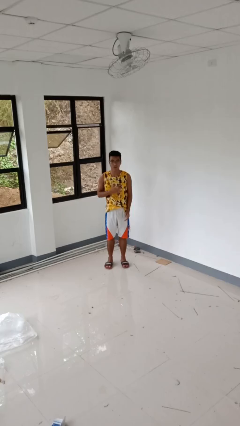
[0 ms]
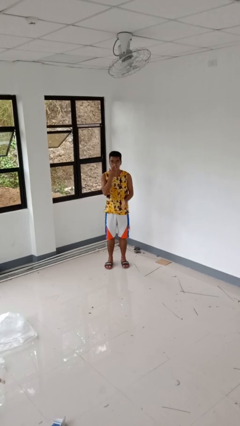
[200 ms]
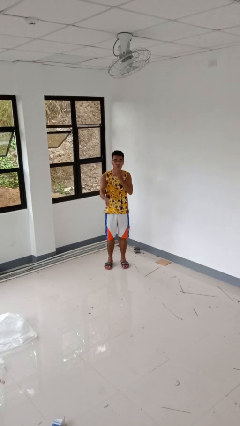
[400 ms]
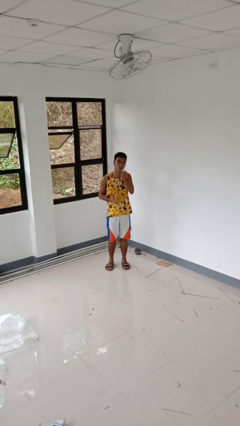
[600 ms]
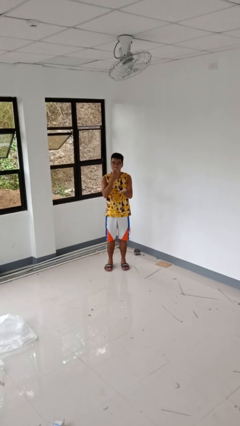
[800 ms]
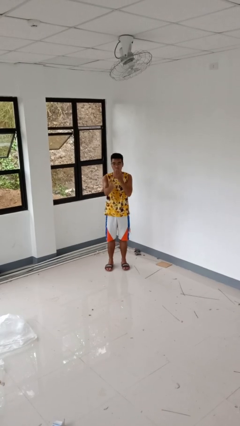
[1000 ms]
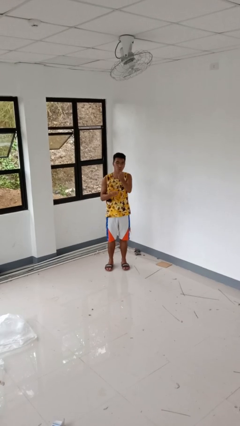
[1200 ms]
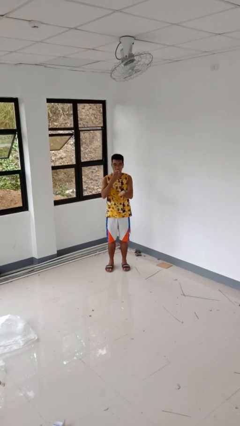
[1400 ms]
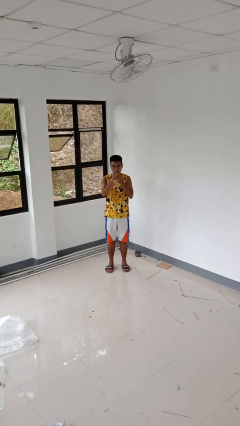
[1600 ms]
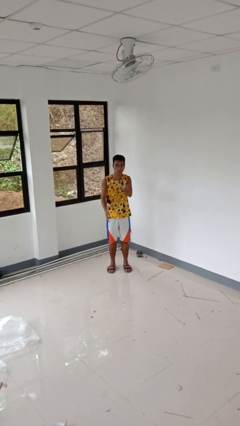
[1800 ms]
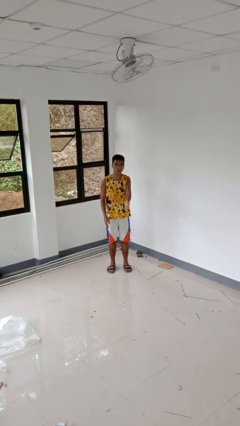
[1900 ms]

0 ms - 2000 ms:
person gestures blow kiss

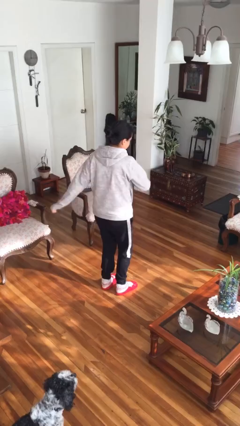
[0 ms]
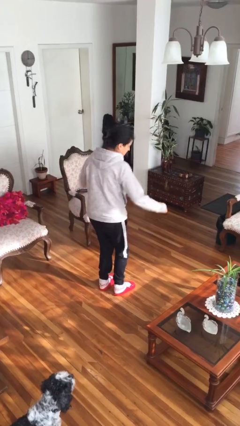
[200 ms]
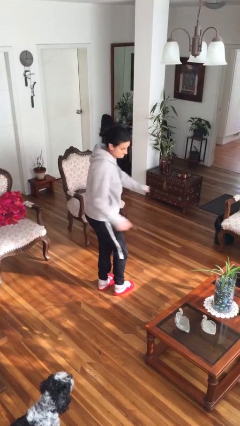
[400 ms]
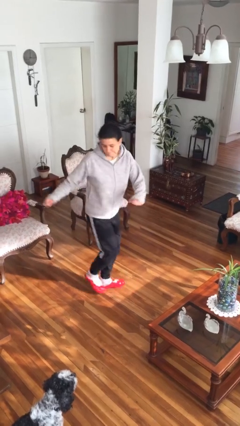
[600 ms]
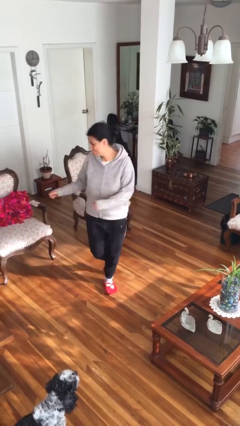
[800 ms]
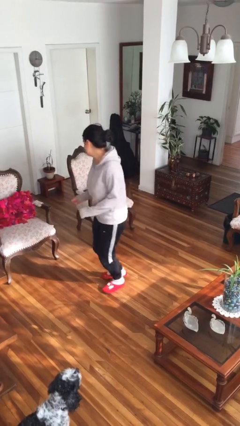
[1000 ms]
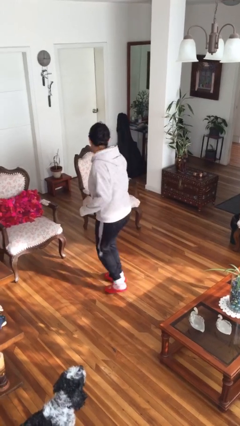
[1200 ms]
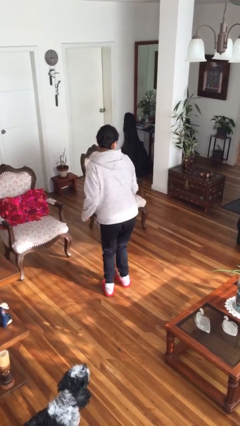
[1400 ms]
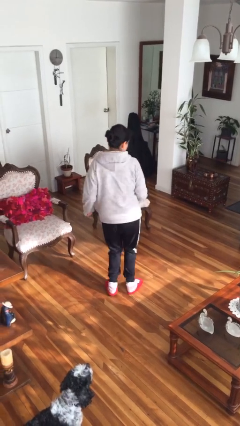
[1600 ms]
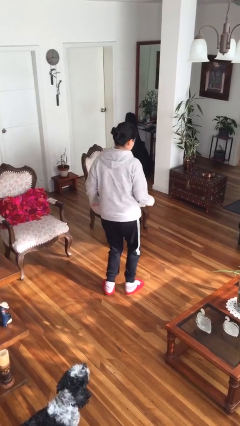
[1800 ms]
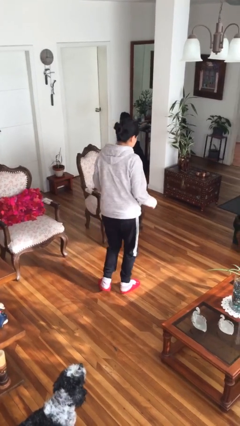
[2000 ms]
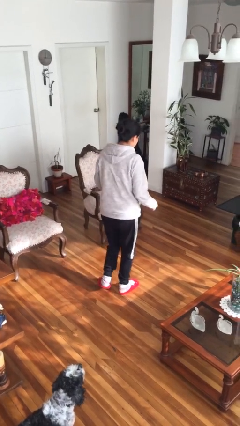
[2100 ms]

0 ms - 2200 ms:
person twirls

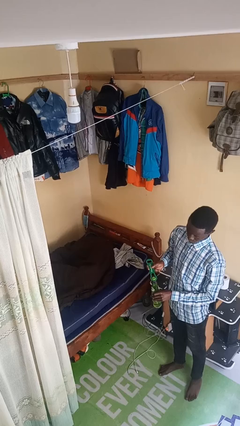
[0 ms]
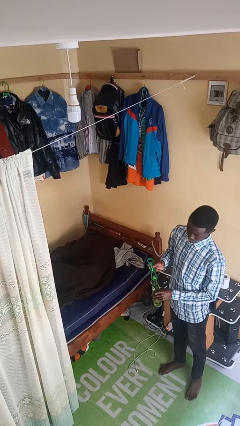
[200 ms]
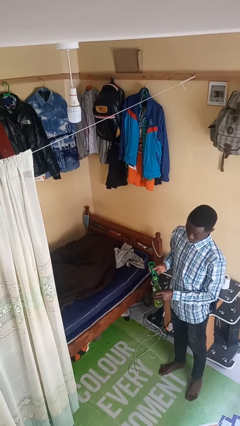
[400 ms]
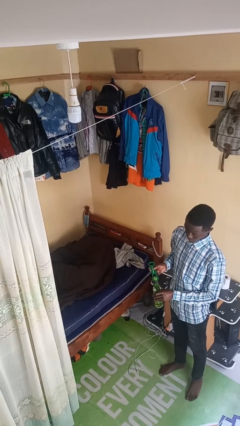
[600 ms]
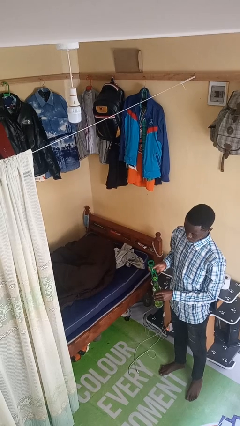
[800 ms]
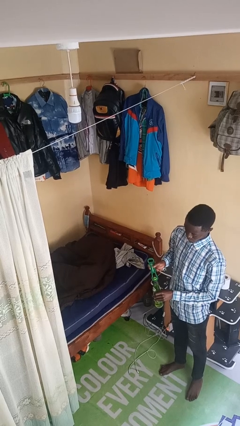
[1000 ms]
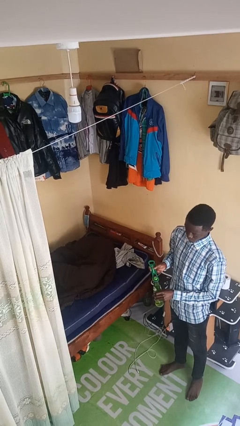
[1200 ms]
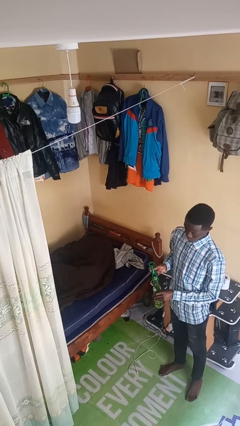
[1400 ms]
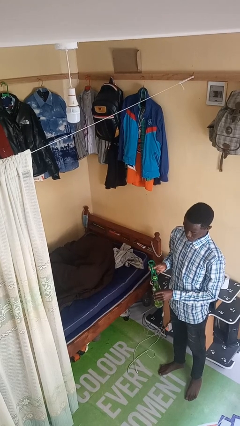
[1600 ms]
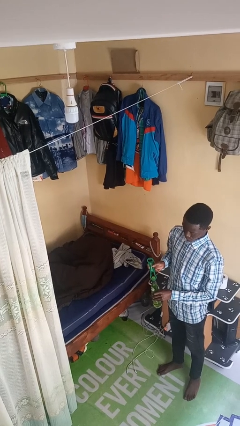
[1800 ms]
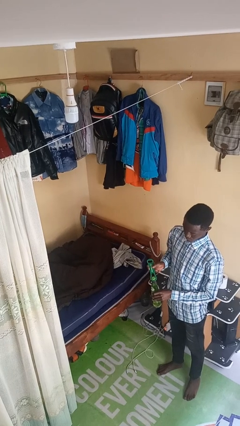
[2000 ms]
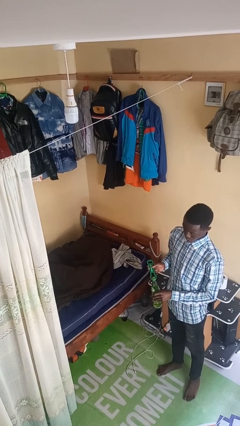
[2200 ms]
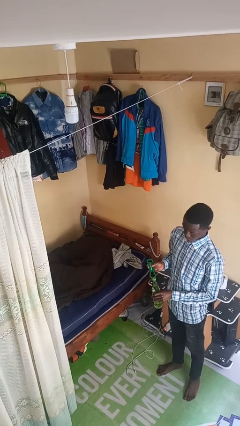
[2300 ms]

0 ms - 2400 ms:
person opens can with can opener

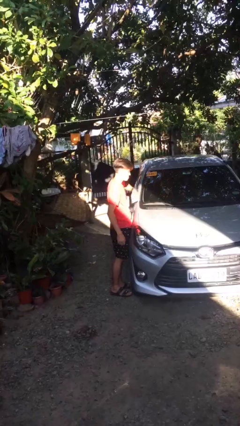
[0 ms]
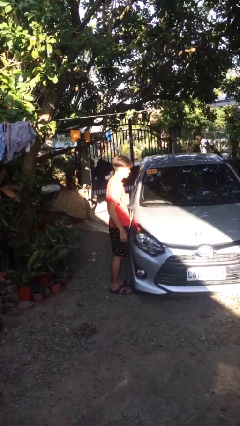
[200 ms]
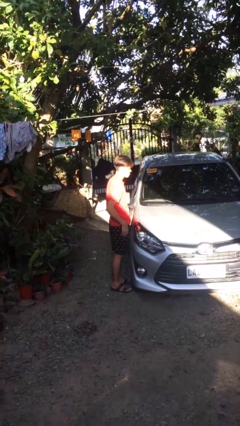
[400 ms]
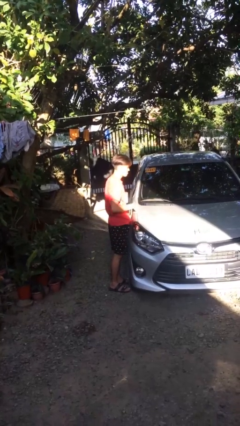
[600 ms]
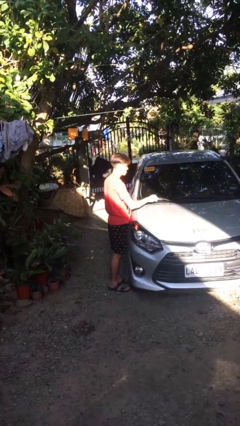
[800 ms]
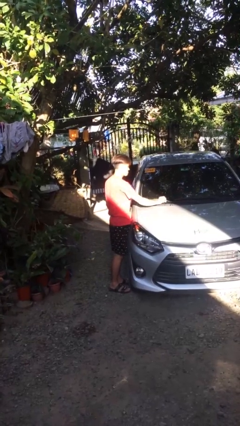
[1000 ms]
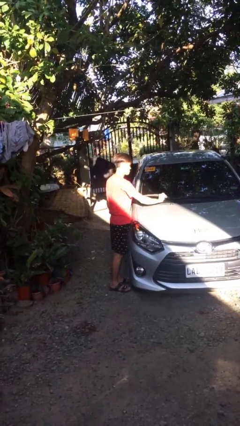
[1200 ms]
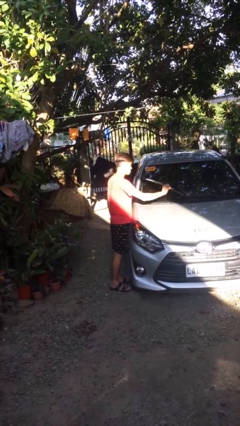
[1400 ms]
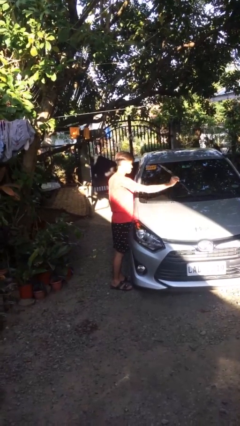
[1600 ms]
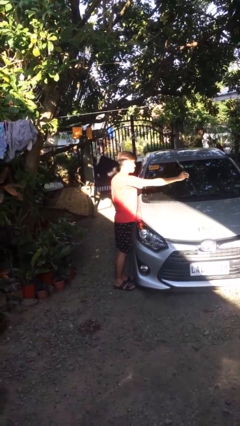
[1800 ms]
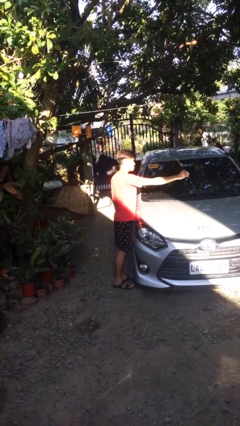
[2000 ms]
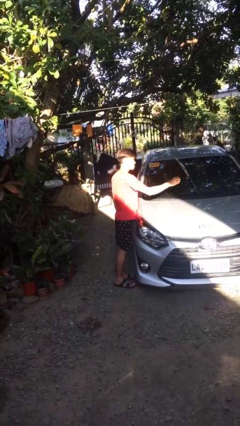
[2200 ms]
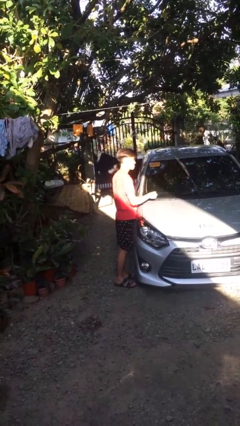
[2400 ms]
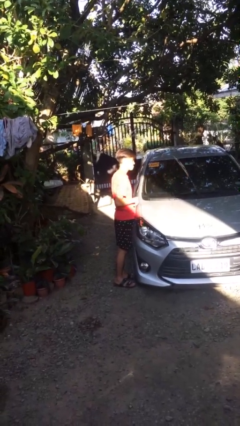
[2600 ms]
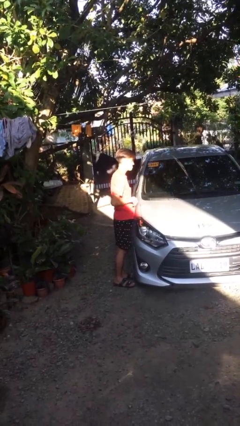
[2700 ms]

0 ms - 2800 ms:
person flips up car wipers

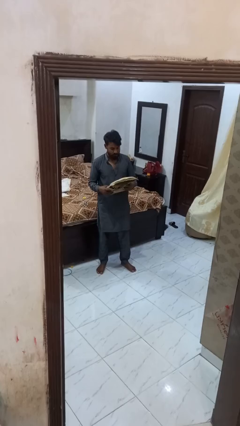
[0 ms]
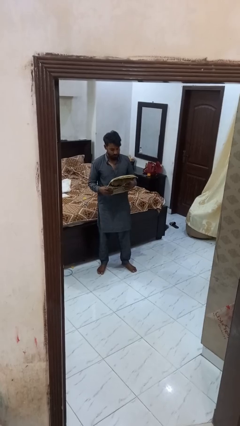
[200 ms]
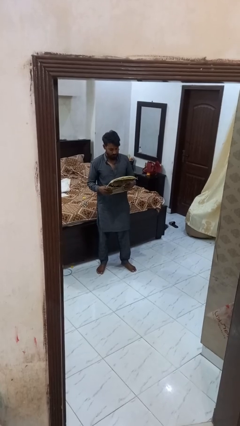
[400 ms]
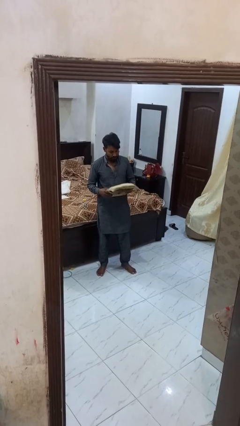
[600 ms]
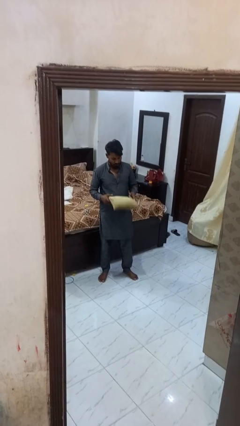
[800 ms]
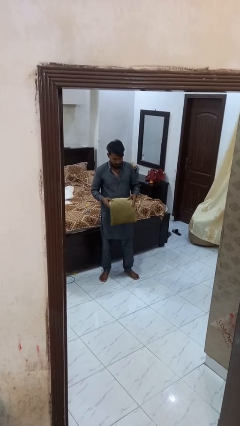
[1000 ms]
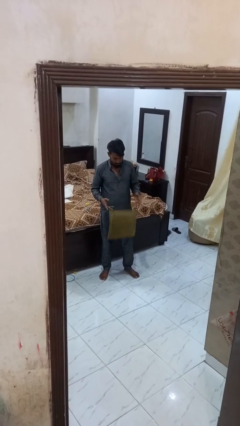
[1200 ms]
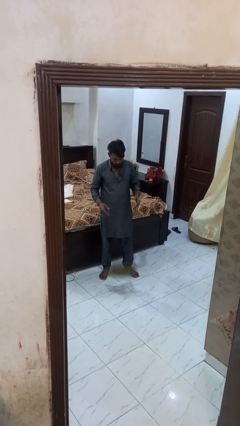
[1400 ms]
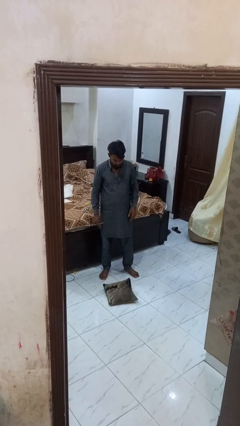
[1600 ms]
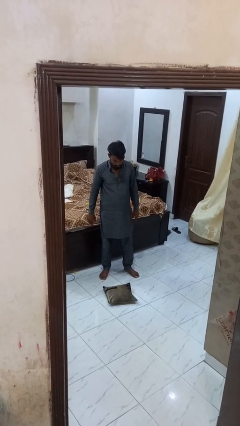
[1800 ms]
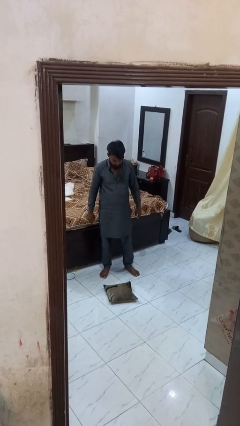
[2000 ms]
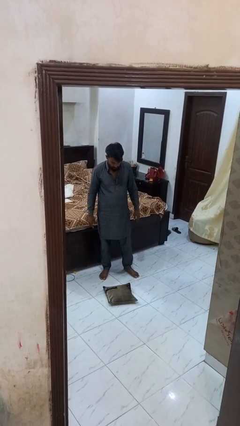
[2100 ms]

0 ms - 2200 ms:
person drops object

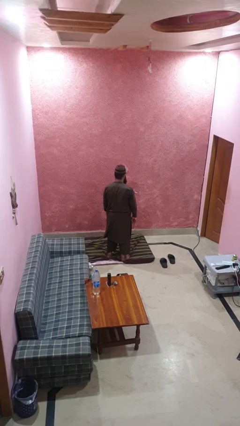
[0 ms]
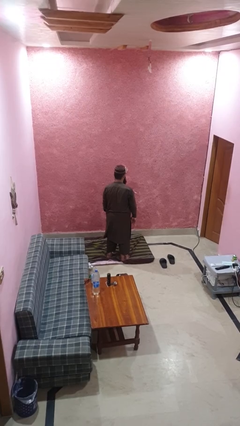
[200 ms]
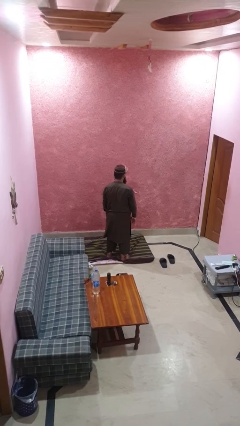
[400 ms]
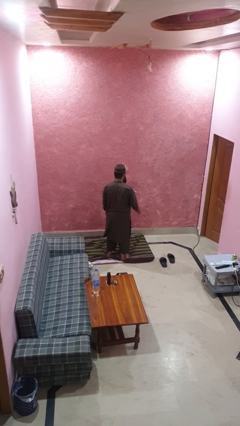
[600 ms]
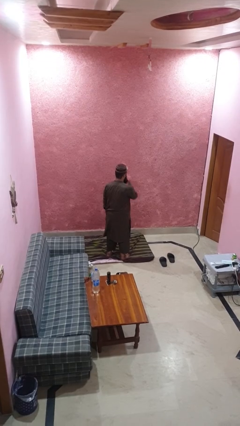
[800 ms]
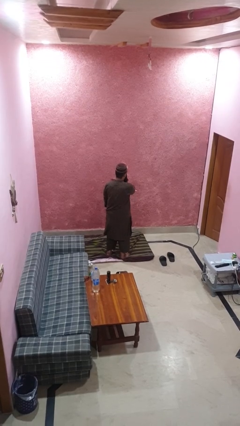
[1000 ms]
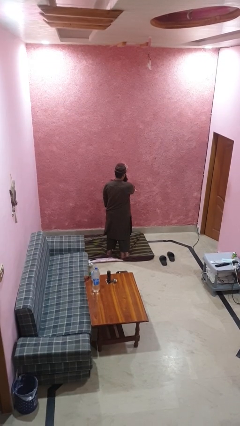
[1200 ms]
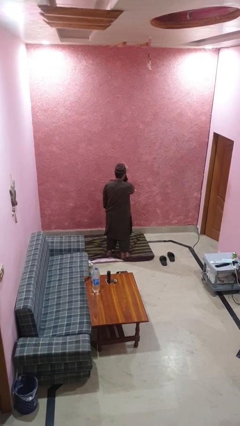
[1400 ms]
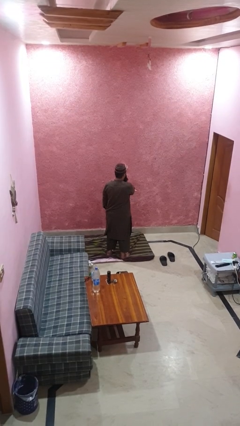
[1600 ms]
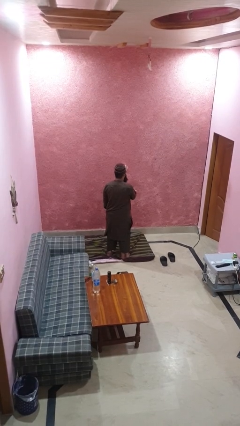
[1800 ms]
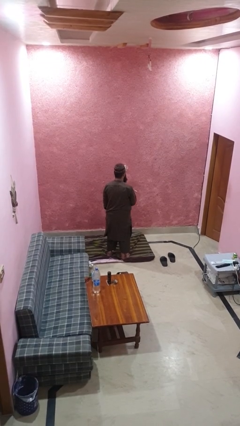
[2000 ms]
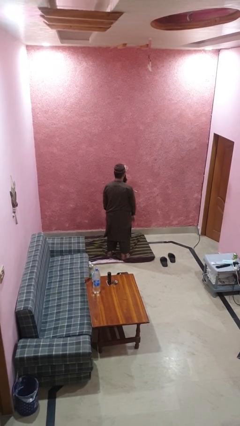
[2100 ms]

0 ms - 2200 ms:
person drums on chest

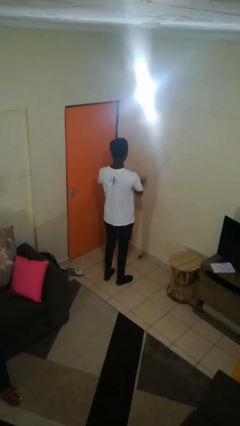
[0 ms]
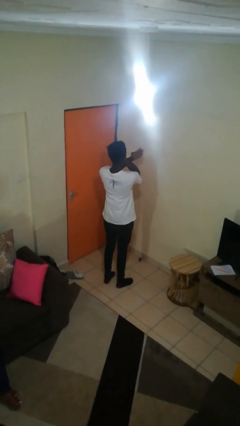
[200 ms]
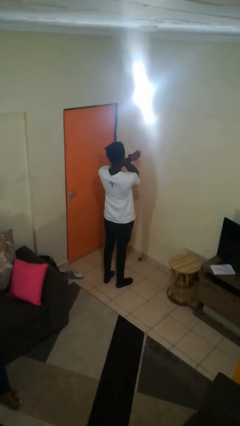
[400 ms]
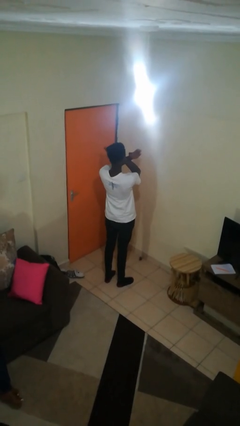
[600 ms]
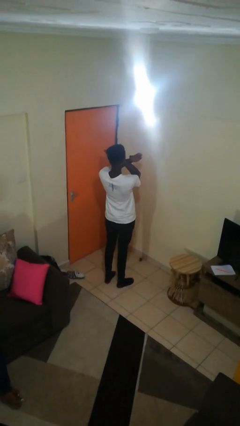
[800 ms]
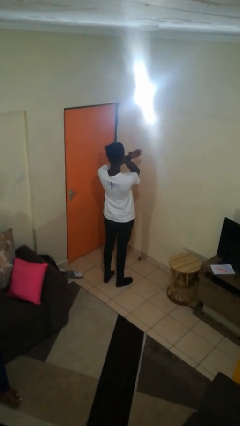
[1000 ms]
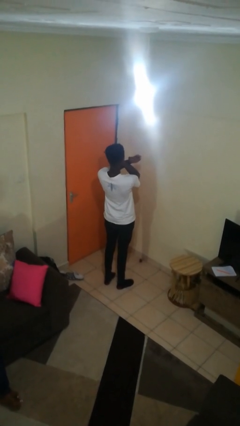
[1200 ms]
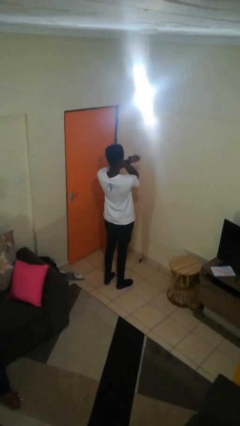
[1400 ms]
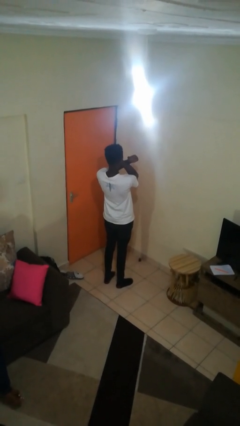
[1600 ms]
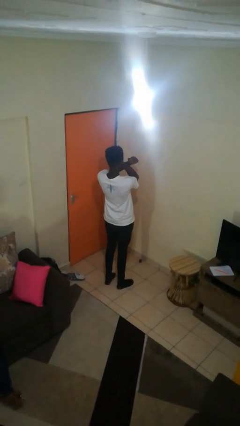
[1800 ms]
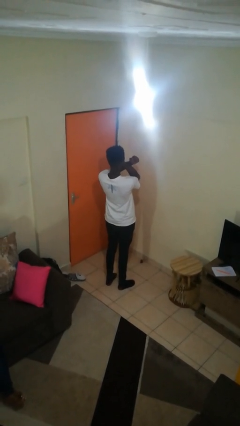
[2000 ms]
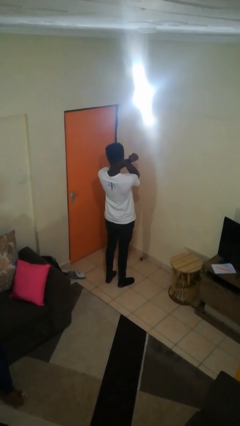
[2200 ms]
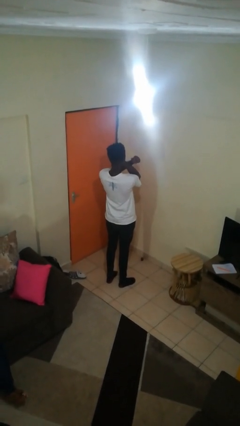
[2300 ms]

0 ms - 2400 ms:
person gestures arms x

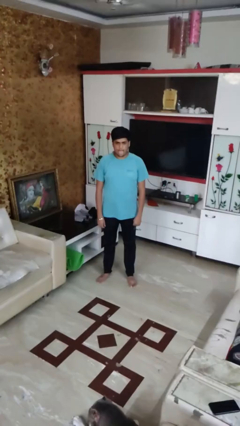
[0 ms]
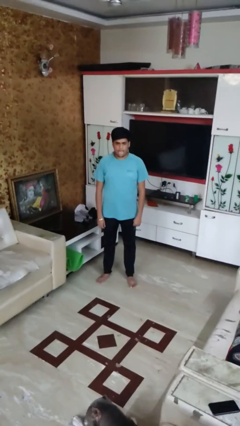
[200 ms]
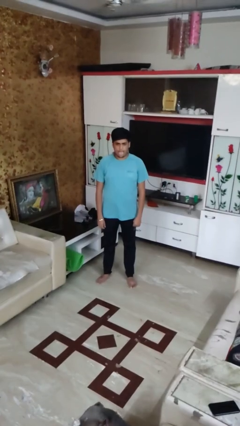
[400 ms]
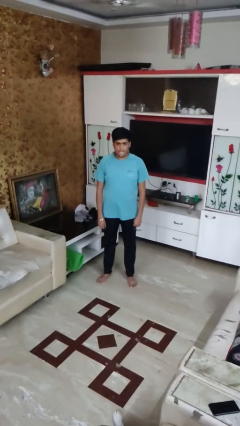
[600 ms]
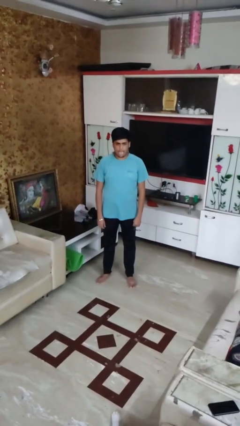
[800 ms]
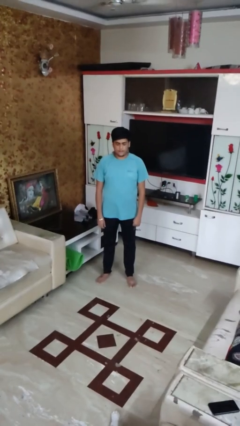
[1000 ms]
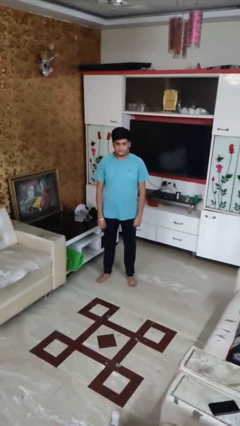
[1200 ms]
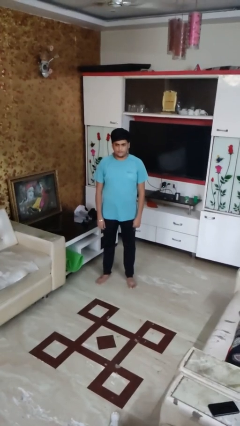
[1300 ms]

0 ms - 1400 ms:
person sticks out tongue
